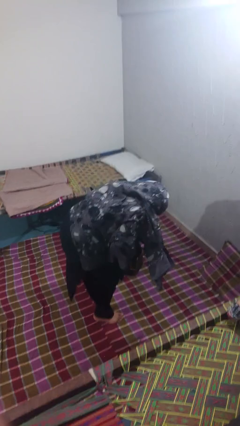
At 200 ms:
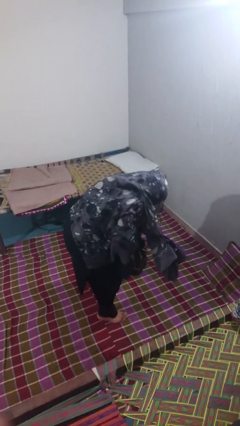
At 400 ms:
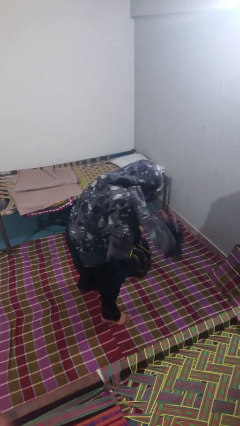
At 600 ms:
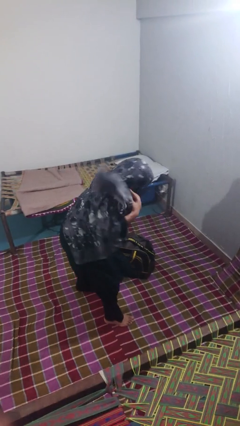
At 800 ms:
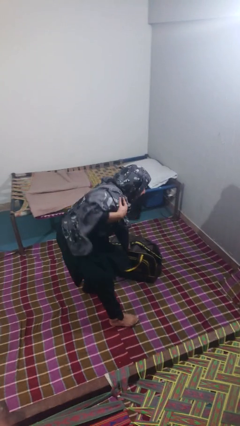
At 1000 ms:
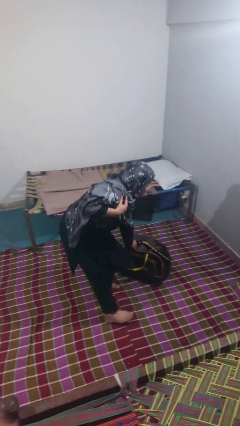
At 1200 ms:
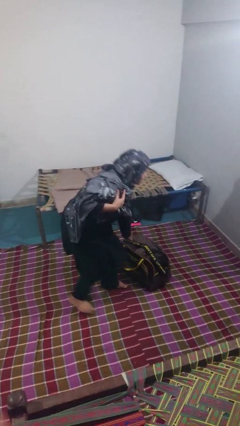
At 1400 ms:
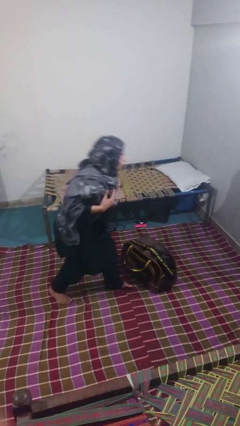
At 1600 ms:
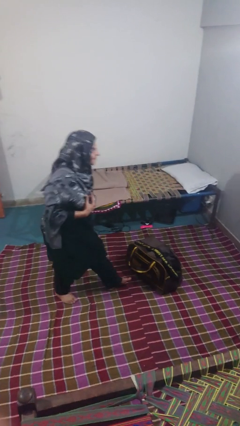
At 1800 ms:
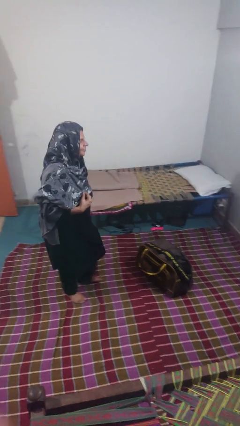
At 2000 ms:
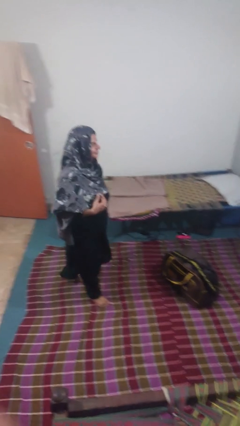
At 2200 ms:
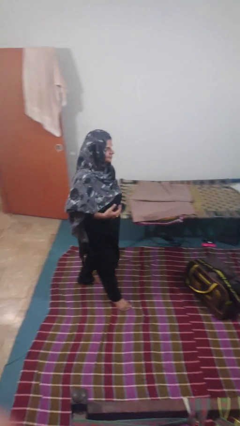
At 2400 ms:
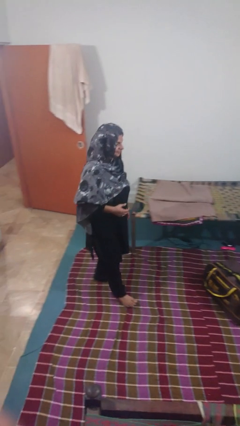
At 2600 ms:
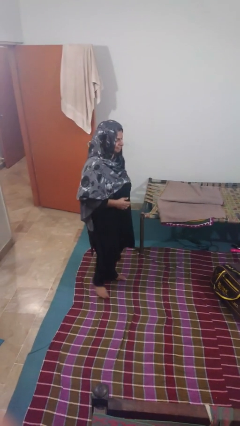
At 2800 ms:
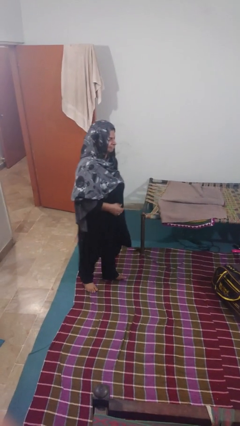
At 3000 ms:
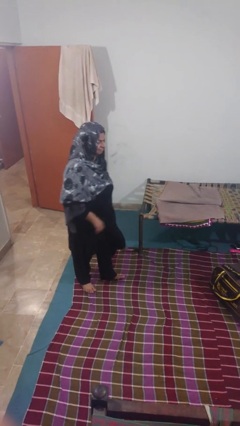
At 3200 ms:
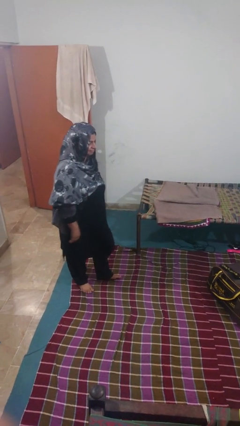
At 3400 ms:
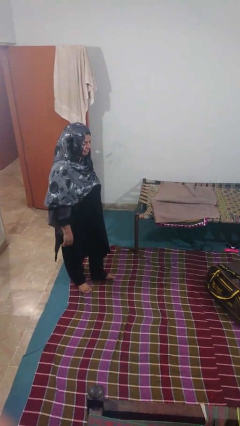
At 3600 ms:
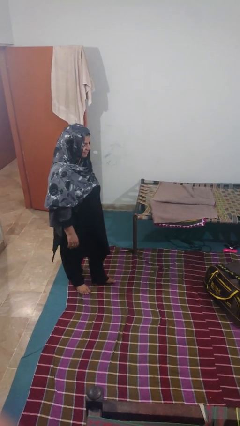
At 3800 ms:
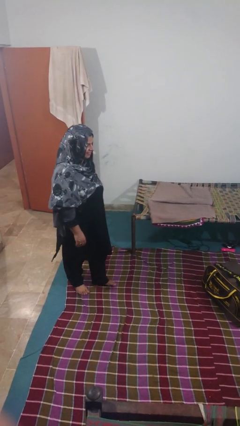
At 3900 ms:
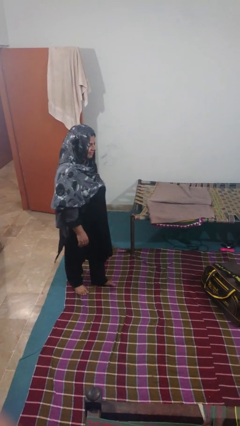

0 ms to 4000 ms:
person stands up from floor

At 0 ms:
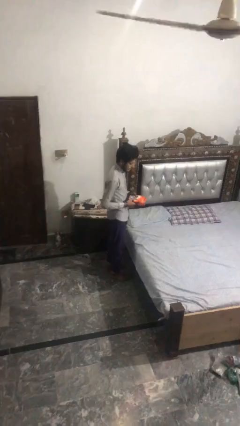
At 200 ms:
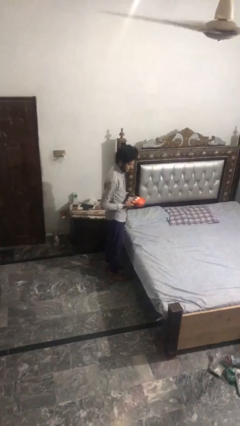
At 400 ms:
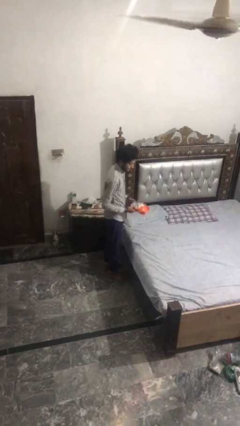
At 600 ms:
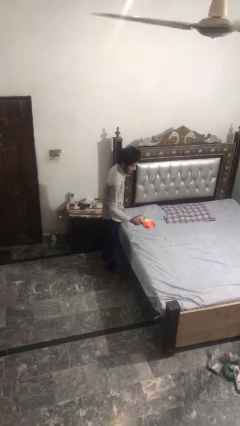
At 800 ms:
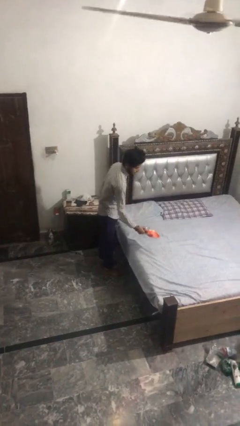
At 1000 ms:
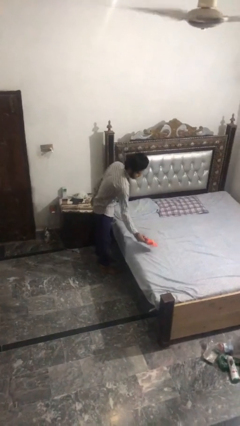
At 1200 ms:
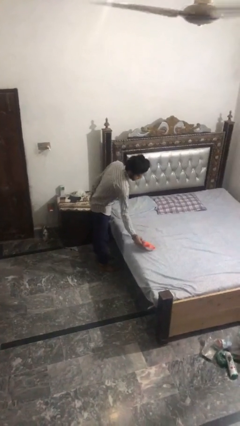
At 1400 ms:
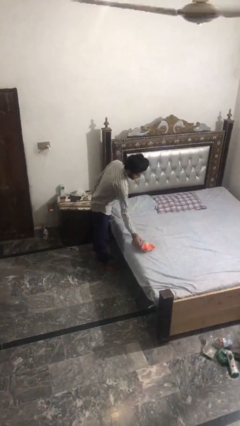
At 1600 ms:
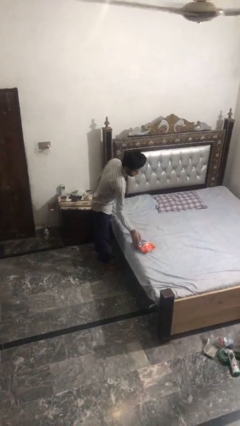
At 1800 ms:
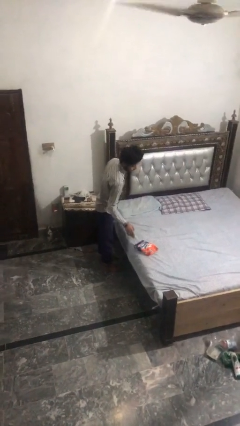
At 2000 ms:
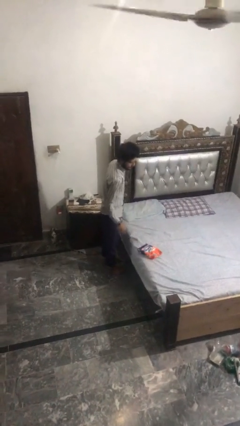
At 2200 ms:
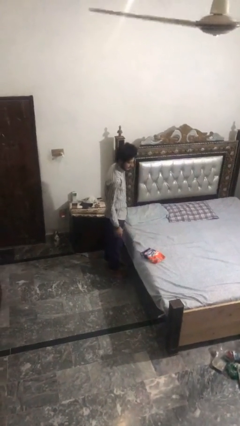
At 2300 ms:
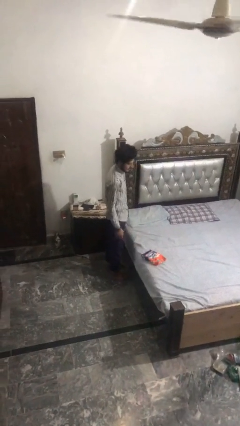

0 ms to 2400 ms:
person puts down object on bed

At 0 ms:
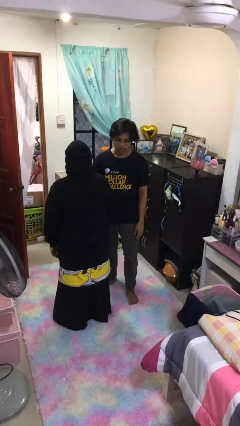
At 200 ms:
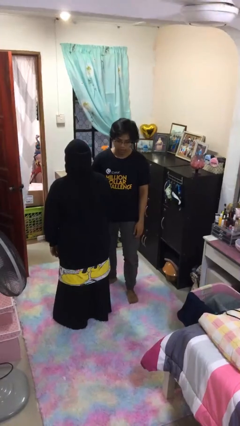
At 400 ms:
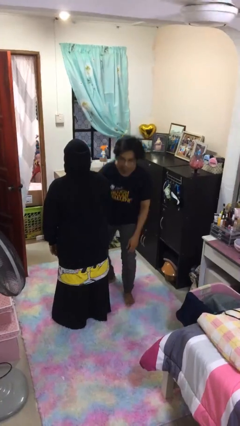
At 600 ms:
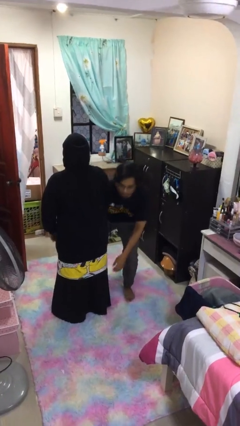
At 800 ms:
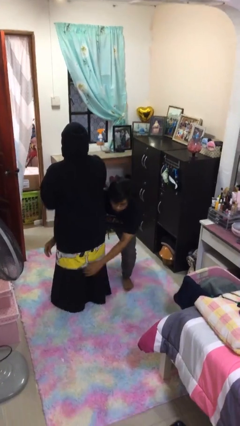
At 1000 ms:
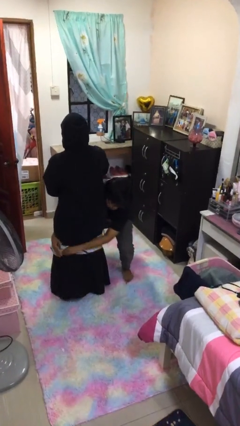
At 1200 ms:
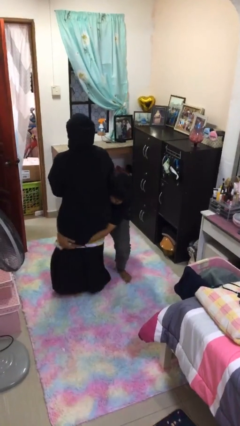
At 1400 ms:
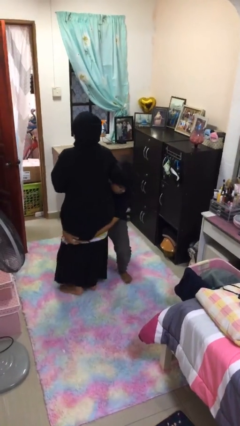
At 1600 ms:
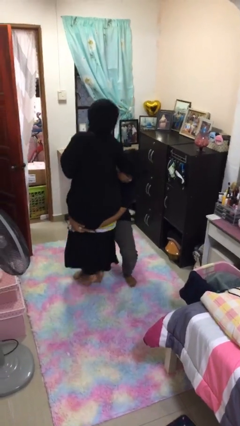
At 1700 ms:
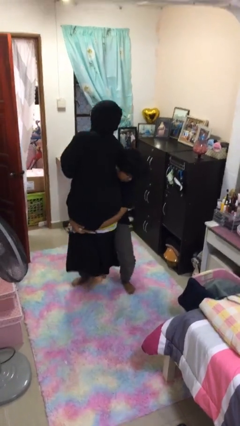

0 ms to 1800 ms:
person picks up person

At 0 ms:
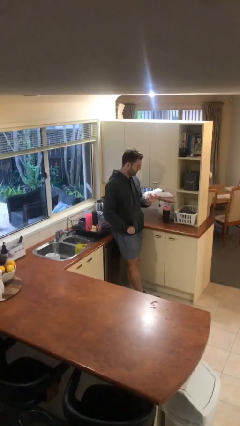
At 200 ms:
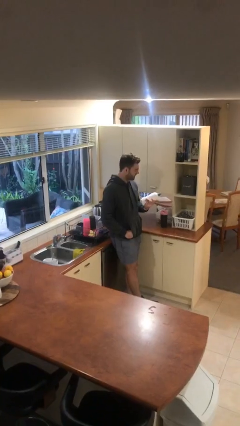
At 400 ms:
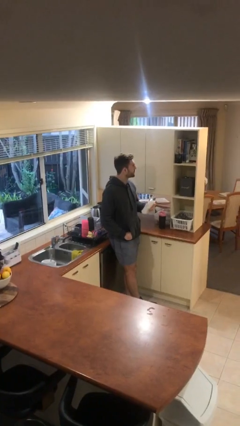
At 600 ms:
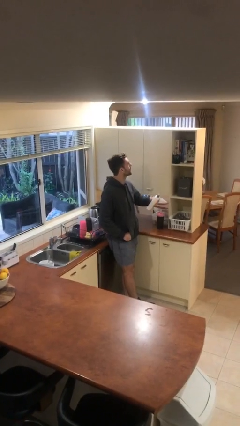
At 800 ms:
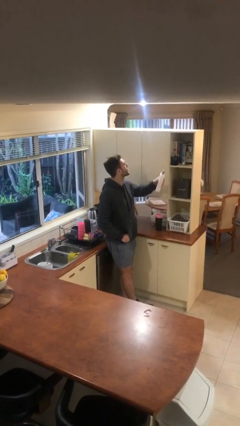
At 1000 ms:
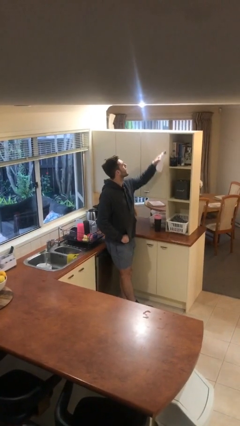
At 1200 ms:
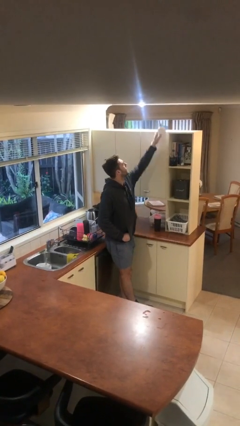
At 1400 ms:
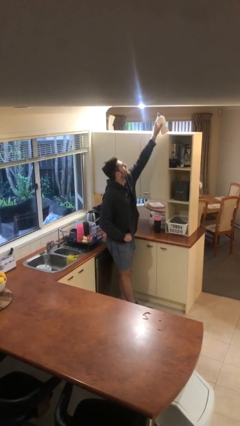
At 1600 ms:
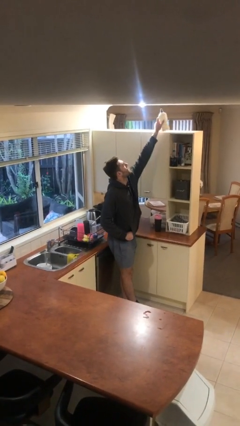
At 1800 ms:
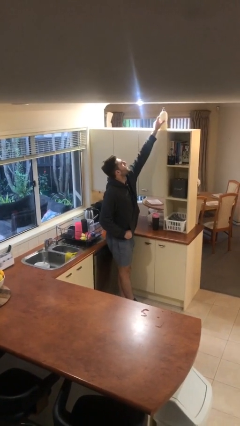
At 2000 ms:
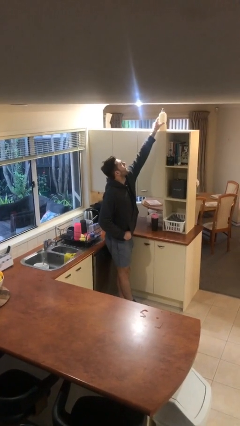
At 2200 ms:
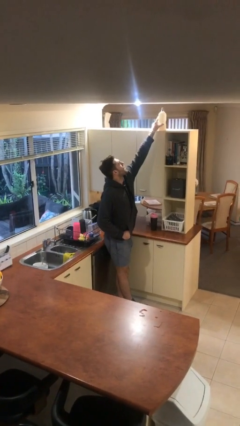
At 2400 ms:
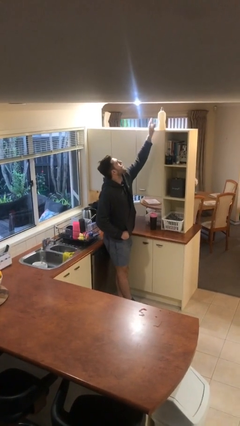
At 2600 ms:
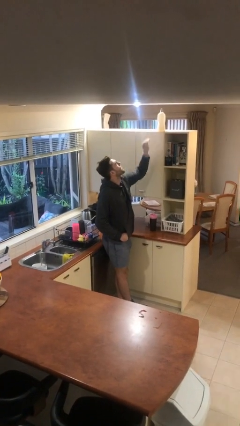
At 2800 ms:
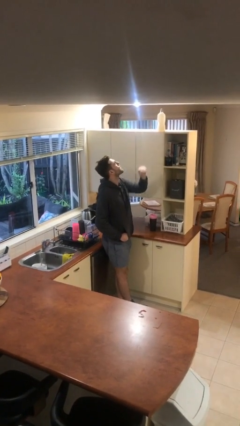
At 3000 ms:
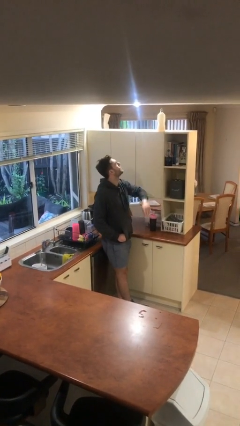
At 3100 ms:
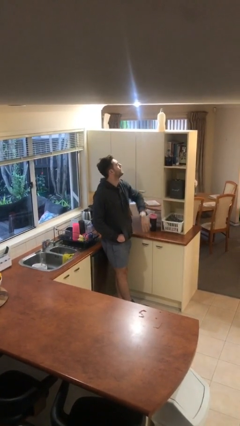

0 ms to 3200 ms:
person puts down object on shelf

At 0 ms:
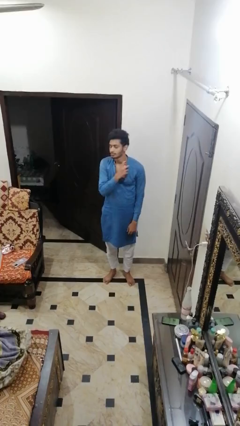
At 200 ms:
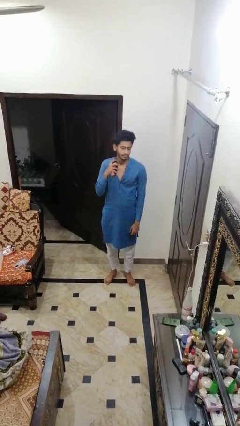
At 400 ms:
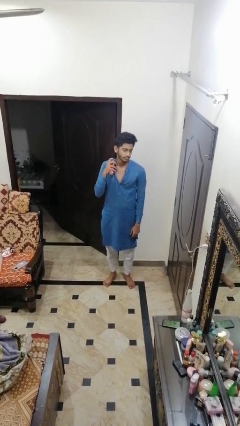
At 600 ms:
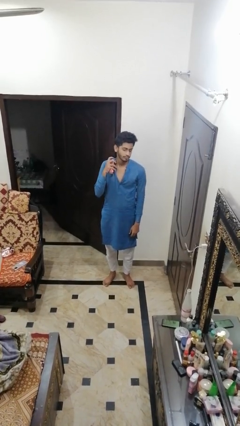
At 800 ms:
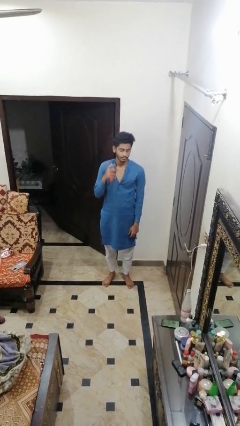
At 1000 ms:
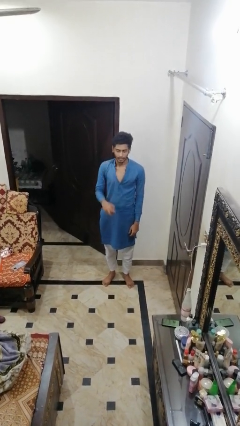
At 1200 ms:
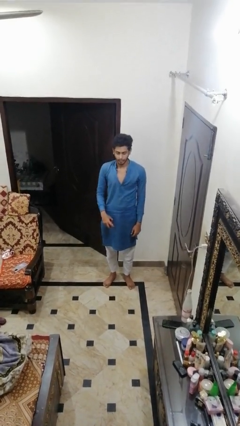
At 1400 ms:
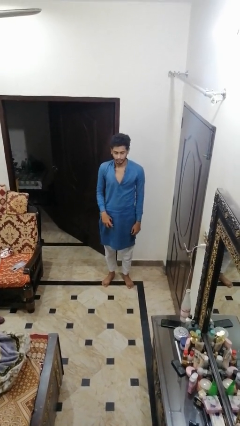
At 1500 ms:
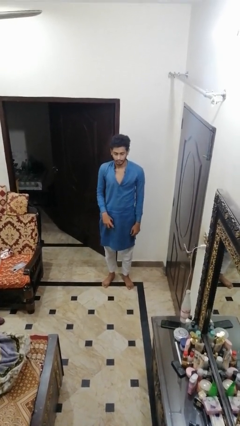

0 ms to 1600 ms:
person applies deodorant

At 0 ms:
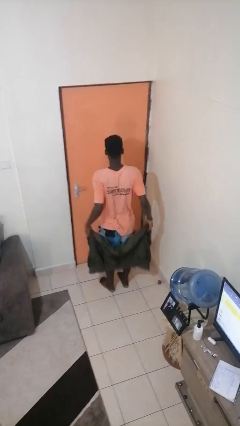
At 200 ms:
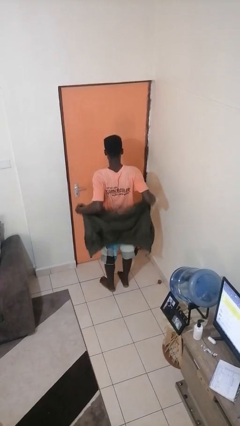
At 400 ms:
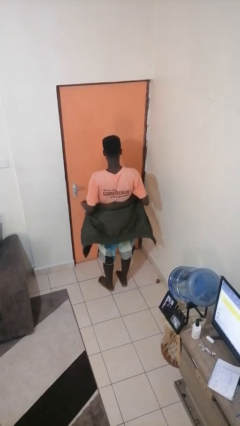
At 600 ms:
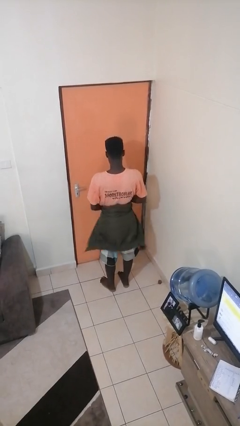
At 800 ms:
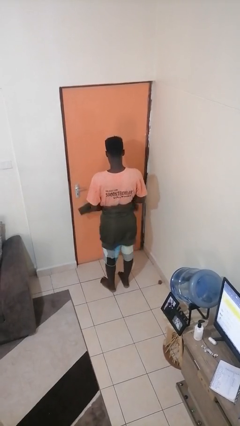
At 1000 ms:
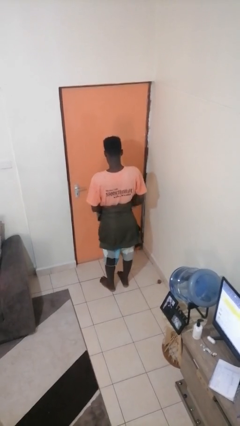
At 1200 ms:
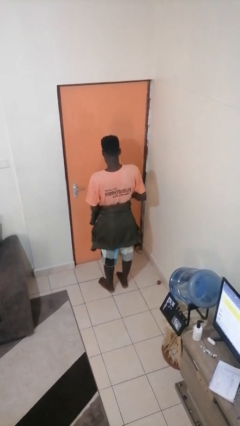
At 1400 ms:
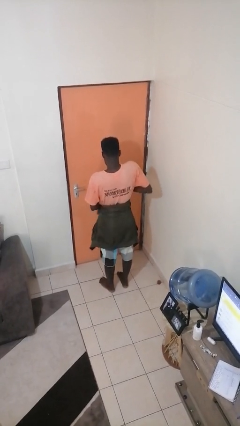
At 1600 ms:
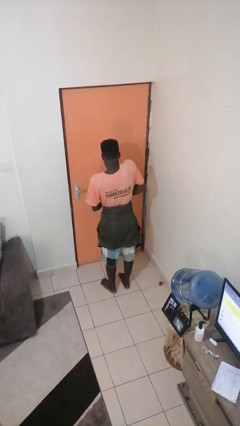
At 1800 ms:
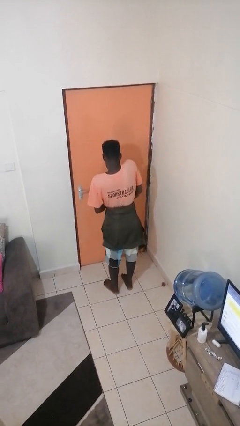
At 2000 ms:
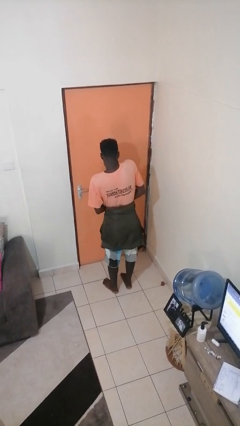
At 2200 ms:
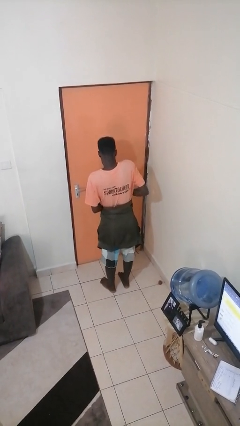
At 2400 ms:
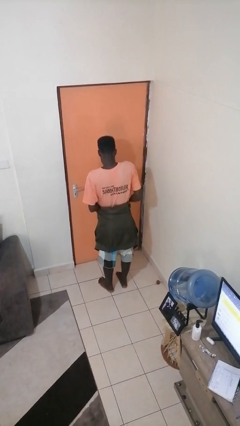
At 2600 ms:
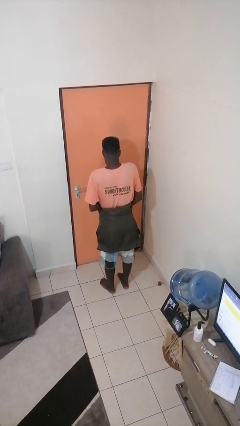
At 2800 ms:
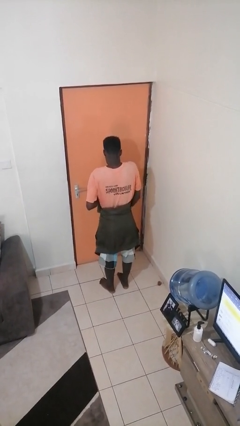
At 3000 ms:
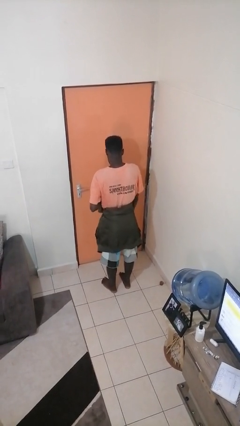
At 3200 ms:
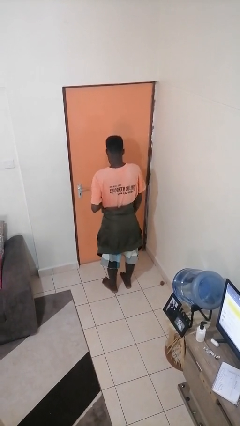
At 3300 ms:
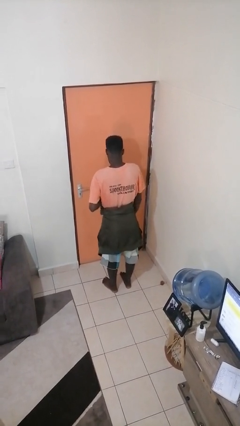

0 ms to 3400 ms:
person ties jacket around waist

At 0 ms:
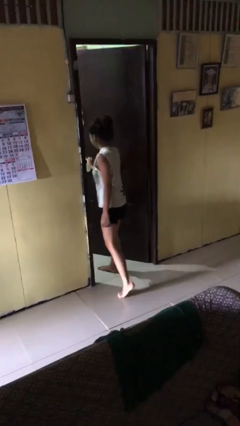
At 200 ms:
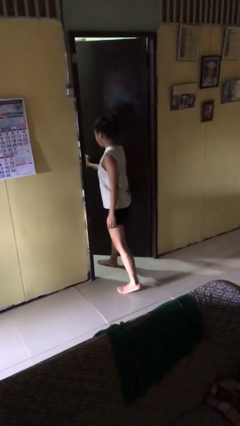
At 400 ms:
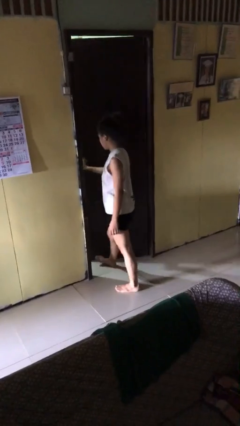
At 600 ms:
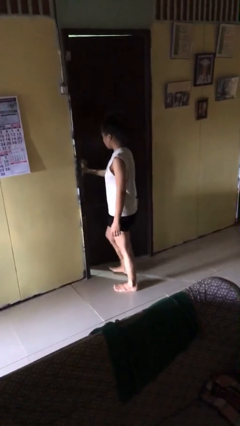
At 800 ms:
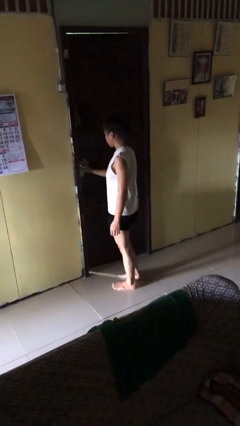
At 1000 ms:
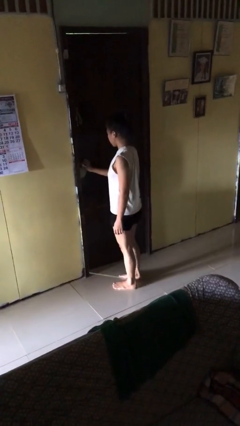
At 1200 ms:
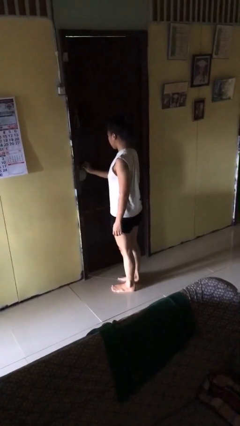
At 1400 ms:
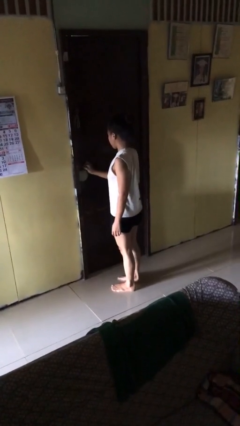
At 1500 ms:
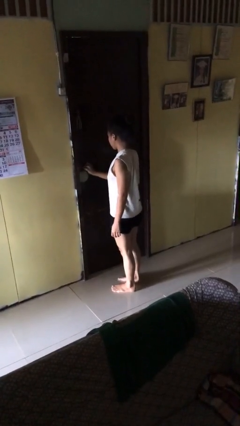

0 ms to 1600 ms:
person closes facility door
